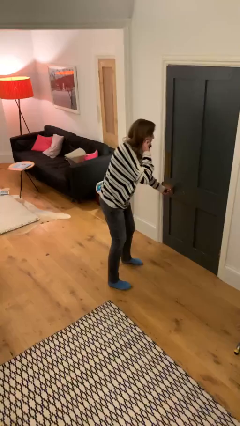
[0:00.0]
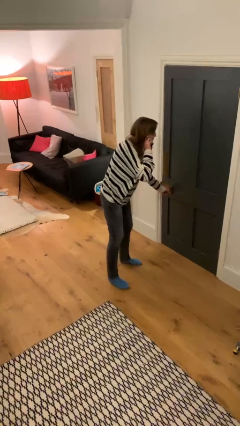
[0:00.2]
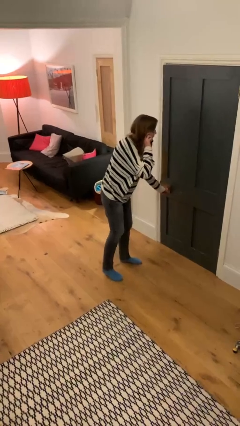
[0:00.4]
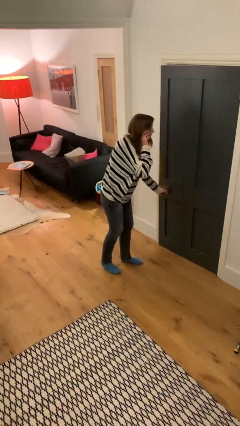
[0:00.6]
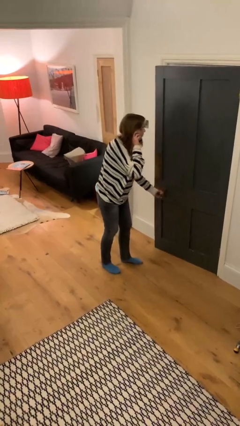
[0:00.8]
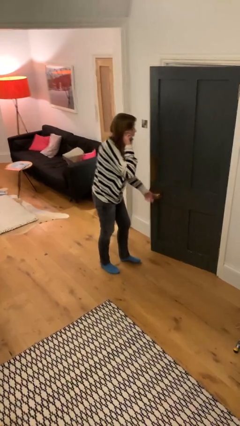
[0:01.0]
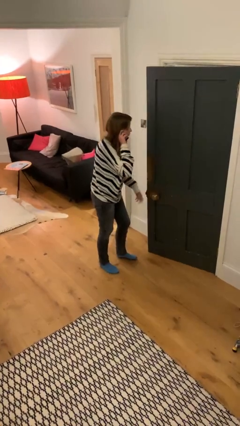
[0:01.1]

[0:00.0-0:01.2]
person opens facility door

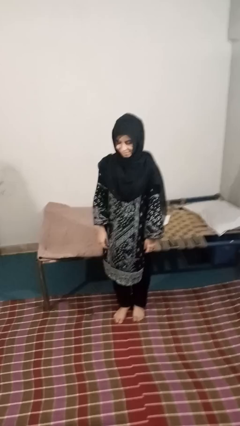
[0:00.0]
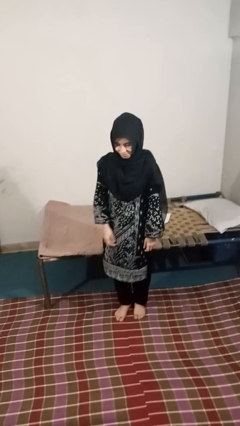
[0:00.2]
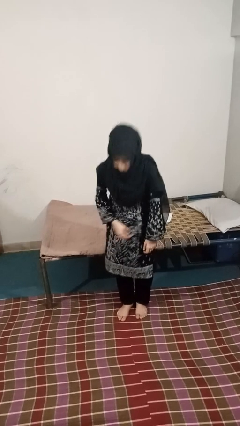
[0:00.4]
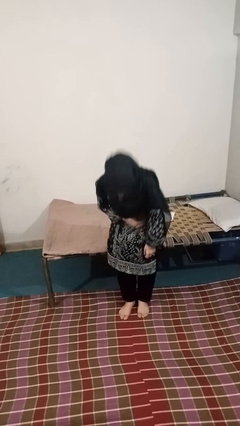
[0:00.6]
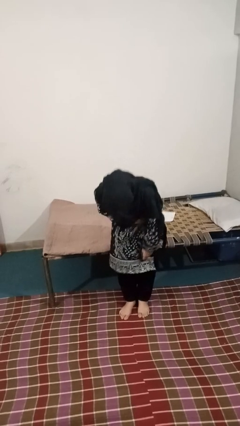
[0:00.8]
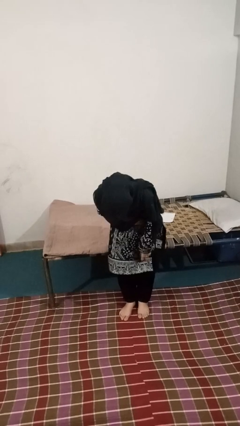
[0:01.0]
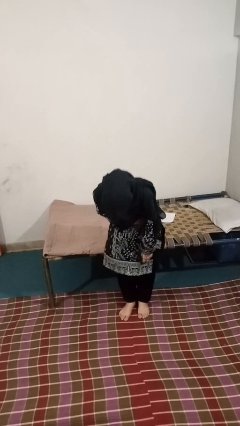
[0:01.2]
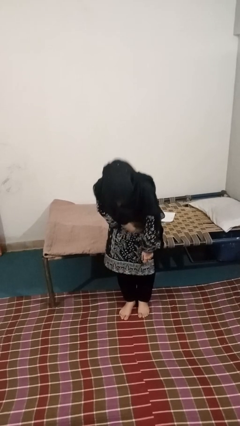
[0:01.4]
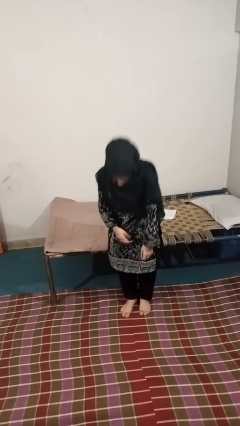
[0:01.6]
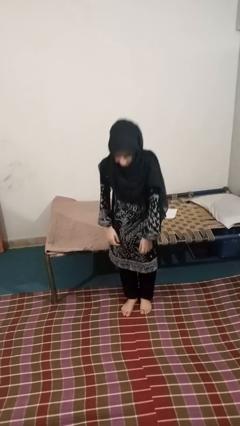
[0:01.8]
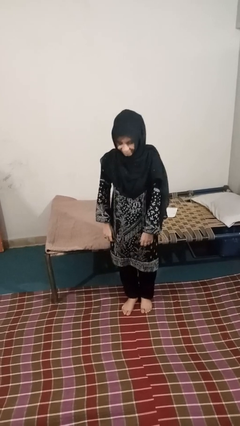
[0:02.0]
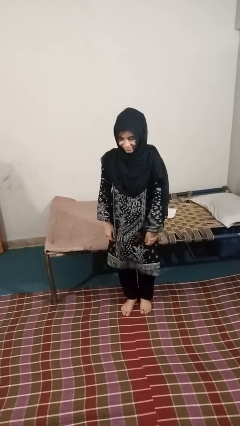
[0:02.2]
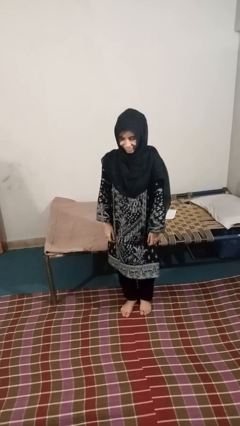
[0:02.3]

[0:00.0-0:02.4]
person bows

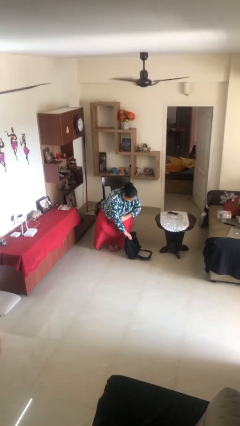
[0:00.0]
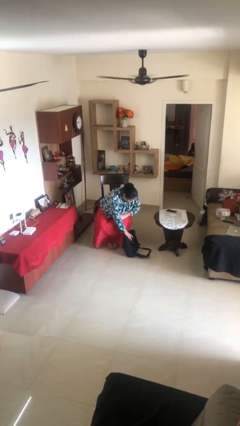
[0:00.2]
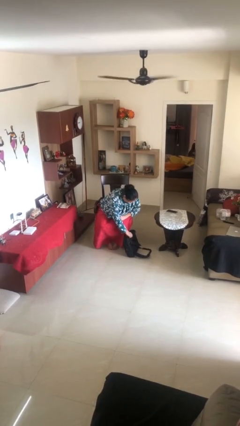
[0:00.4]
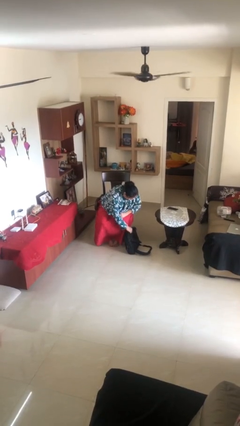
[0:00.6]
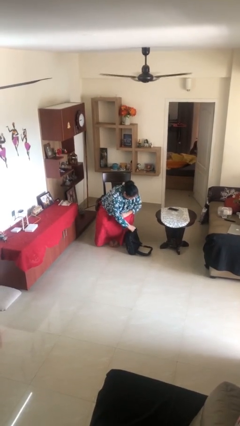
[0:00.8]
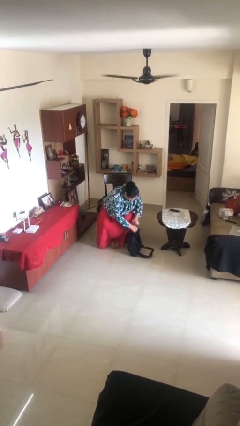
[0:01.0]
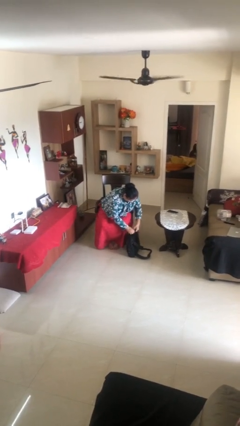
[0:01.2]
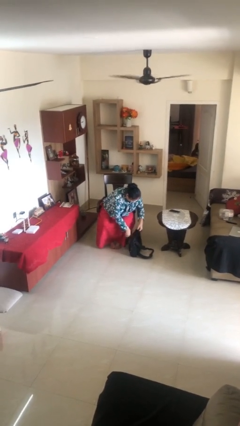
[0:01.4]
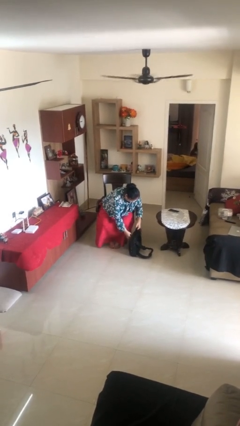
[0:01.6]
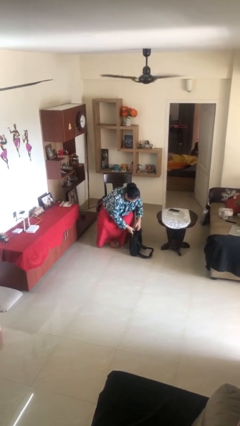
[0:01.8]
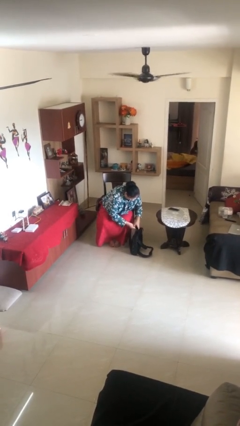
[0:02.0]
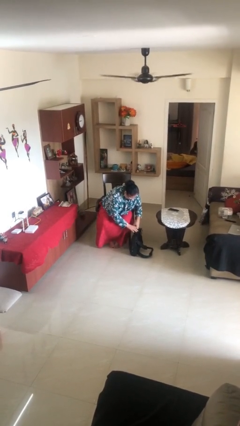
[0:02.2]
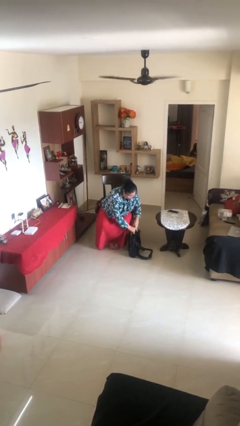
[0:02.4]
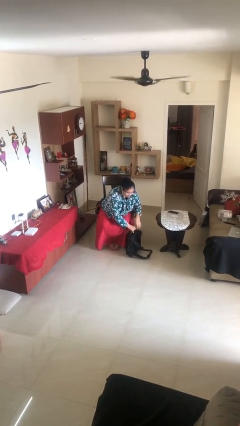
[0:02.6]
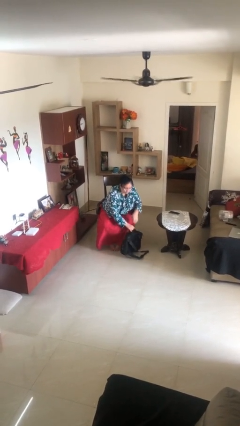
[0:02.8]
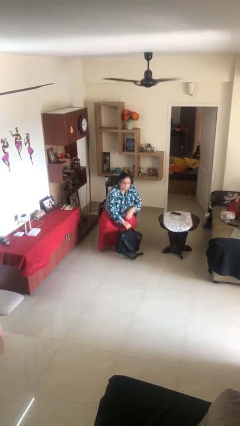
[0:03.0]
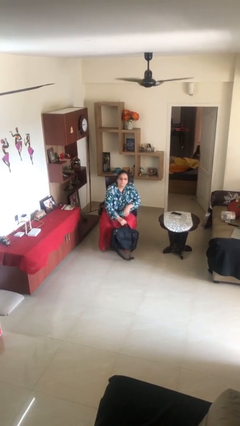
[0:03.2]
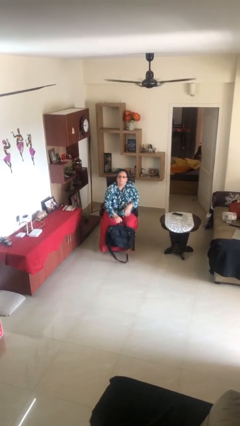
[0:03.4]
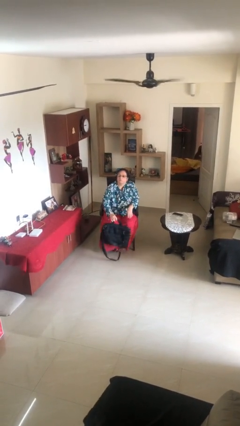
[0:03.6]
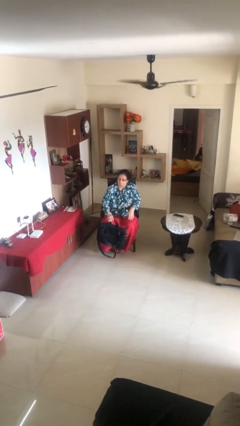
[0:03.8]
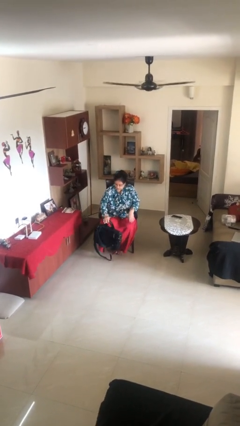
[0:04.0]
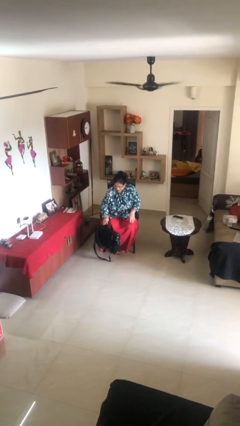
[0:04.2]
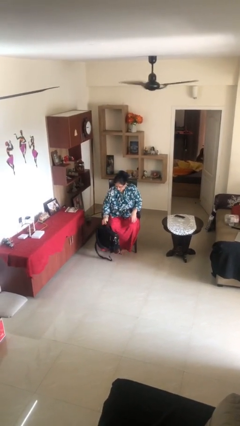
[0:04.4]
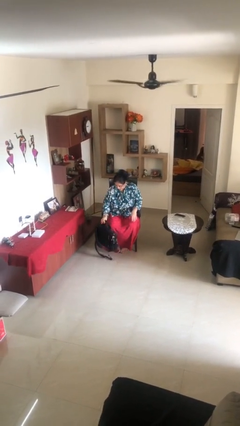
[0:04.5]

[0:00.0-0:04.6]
person picks up object from floor

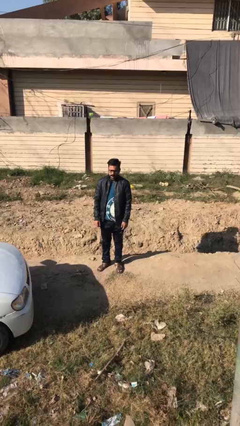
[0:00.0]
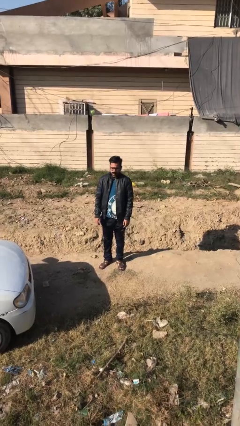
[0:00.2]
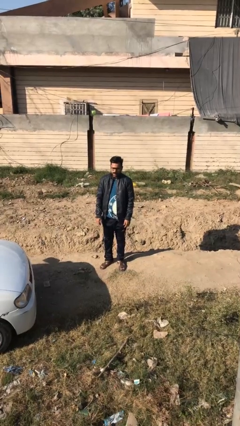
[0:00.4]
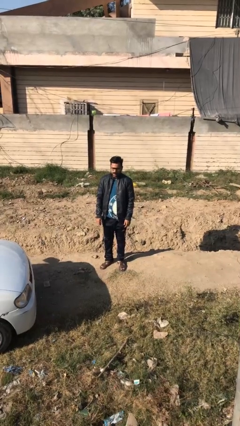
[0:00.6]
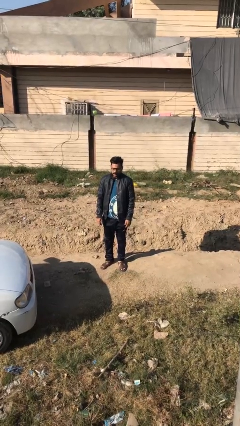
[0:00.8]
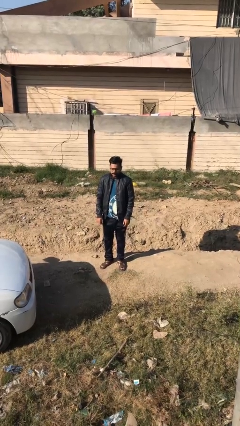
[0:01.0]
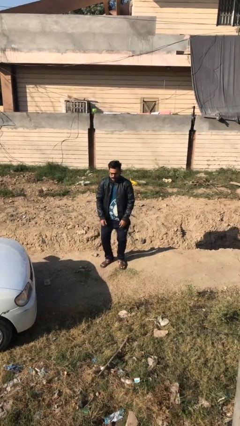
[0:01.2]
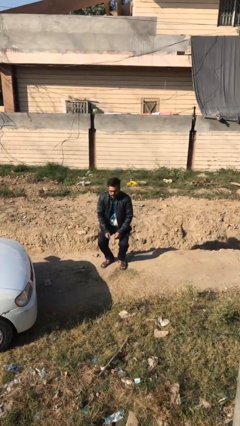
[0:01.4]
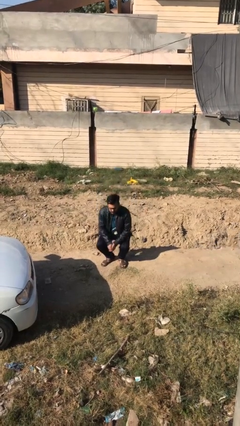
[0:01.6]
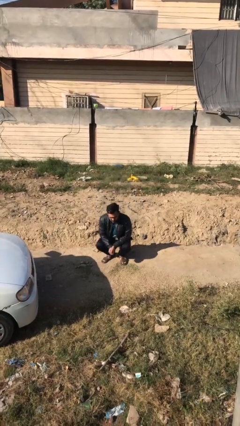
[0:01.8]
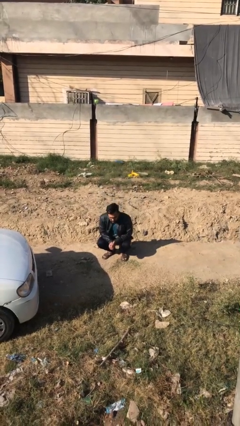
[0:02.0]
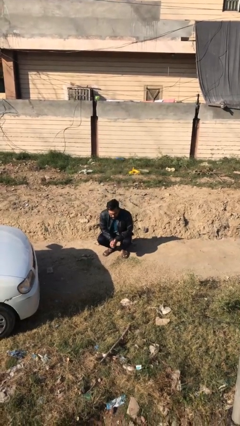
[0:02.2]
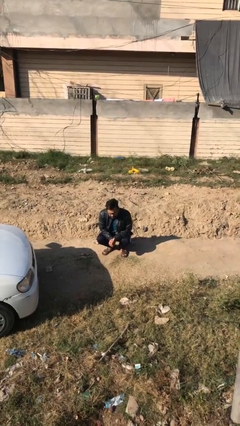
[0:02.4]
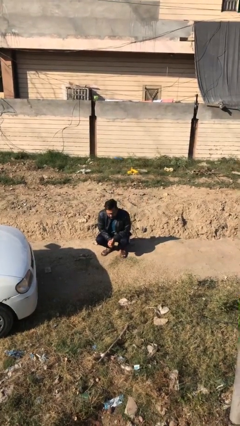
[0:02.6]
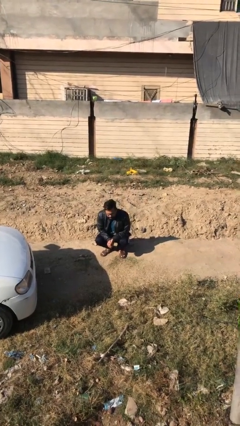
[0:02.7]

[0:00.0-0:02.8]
person sits down

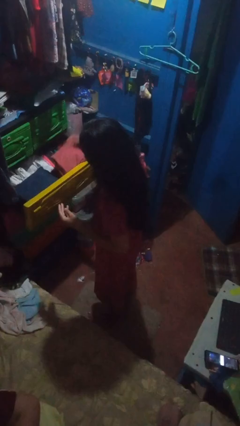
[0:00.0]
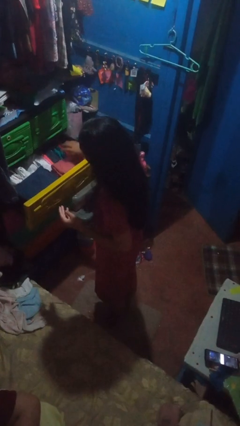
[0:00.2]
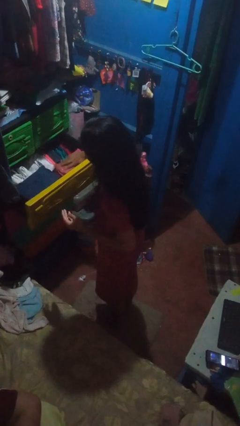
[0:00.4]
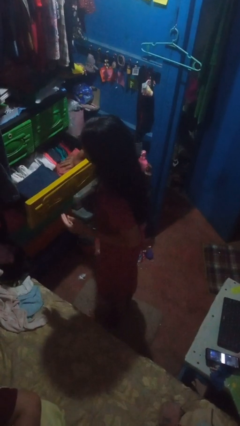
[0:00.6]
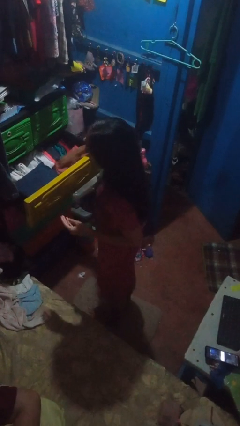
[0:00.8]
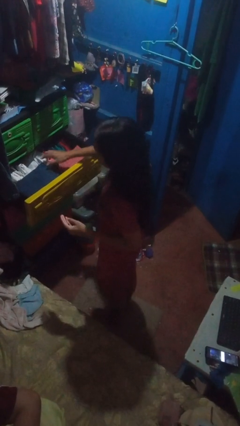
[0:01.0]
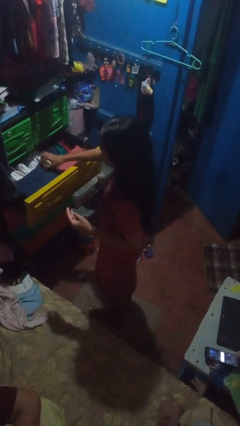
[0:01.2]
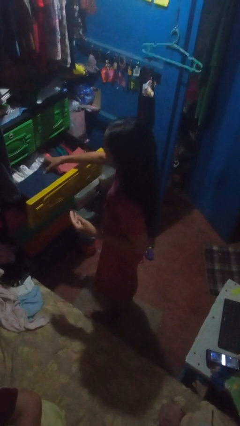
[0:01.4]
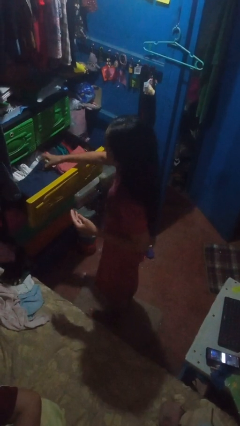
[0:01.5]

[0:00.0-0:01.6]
person puts clothes into dresser

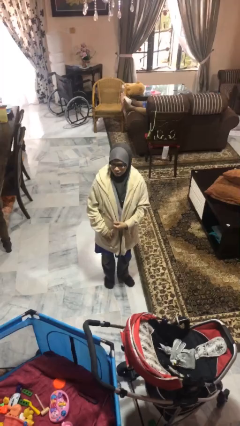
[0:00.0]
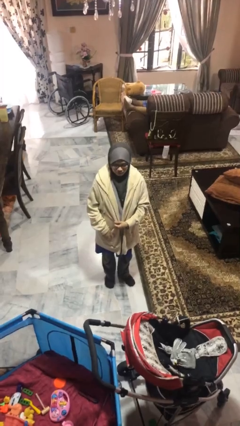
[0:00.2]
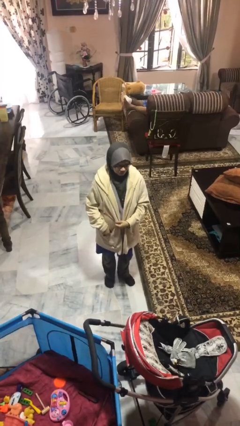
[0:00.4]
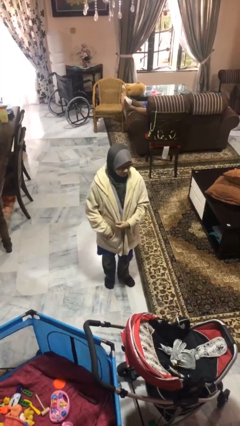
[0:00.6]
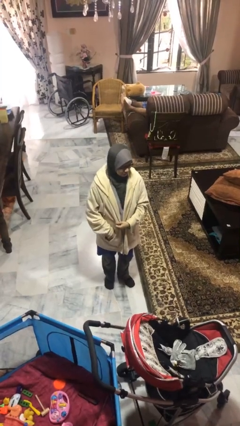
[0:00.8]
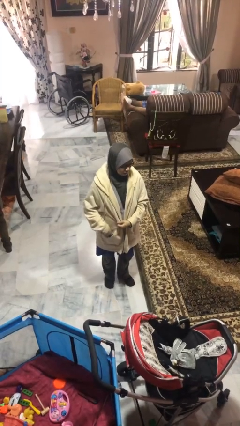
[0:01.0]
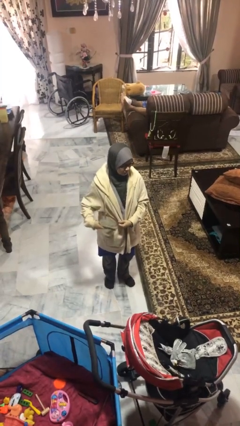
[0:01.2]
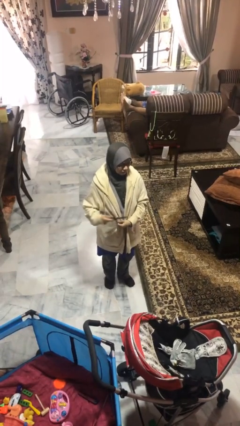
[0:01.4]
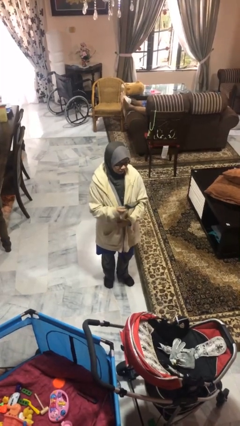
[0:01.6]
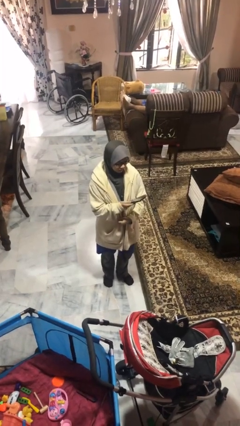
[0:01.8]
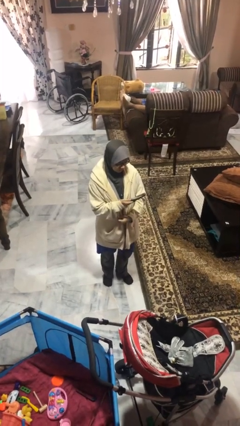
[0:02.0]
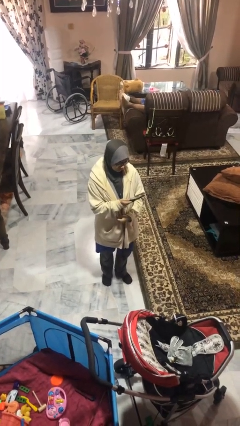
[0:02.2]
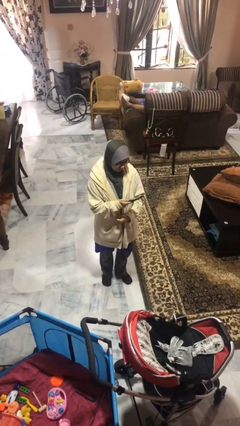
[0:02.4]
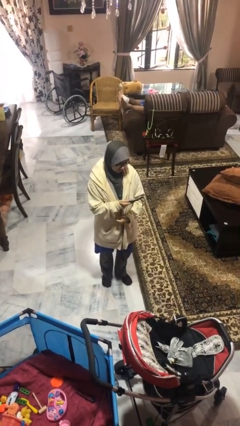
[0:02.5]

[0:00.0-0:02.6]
person takes phone from pocket

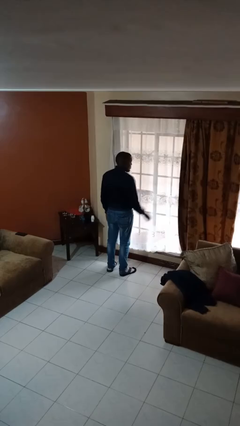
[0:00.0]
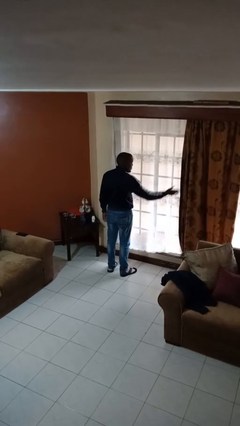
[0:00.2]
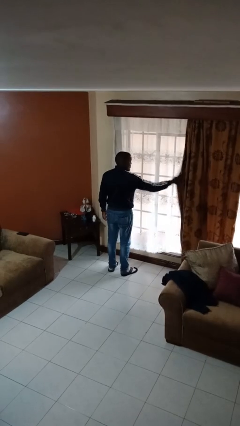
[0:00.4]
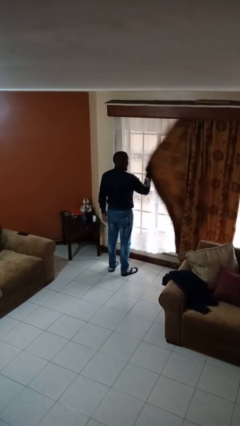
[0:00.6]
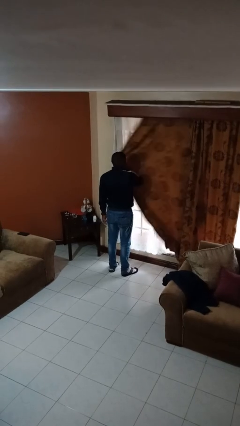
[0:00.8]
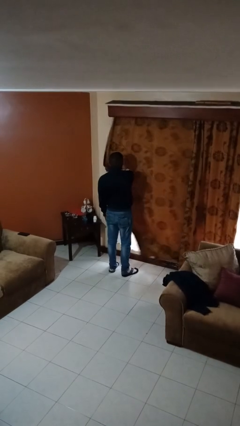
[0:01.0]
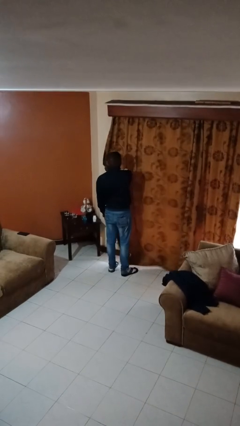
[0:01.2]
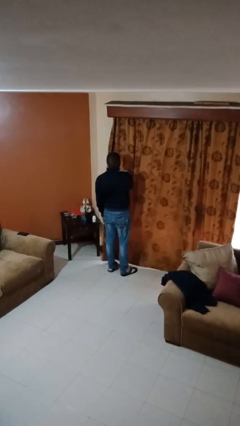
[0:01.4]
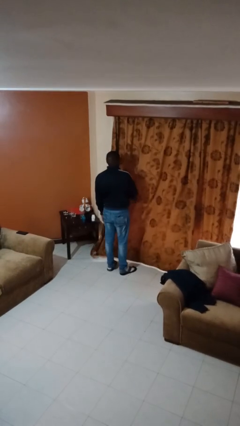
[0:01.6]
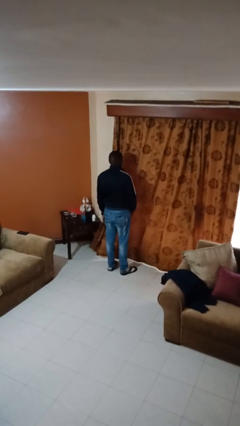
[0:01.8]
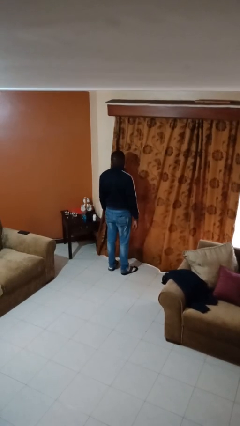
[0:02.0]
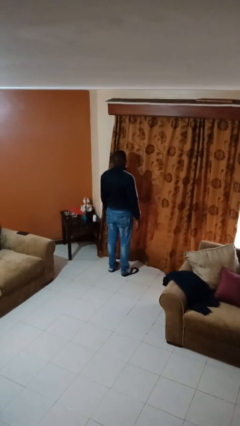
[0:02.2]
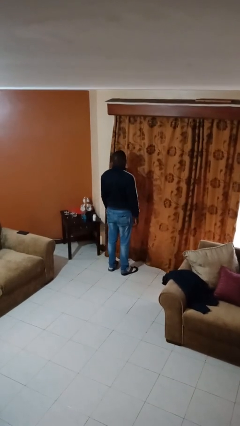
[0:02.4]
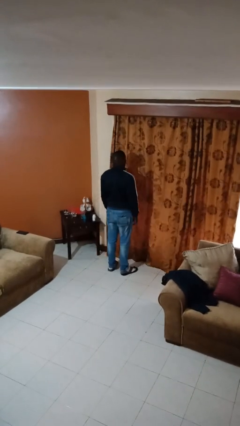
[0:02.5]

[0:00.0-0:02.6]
person closes curtains
